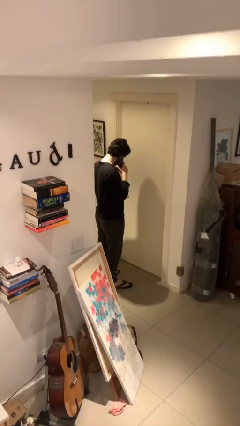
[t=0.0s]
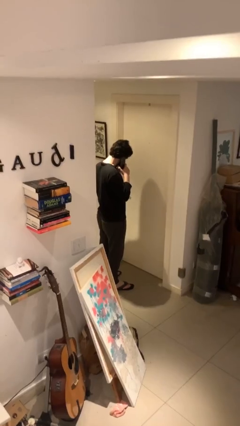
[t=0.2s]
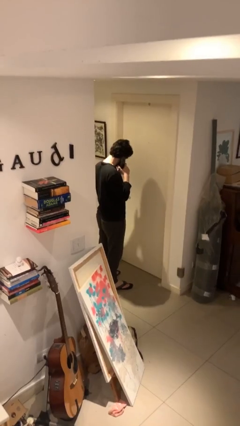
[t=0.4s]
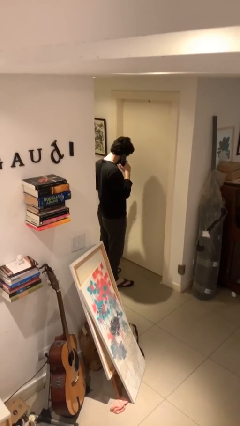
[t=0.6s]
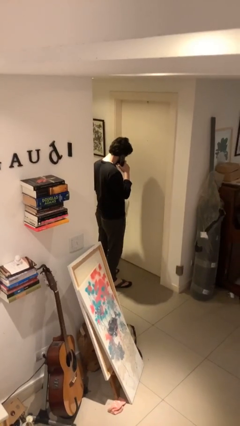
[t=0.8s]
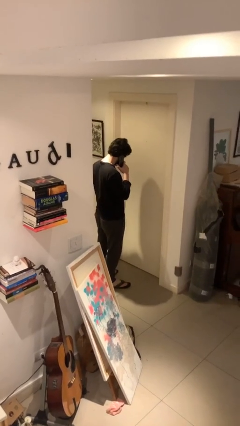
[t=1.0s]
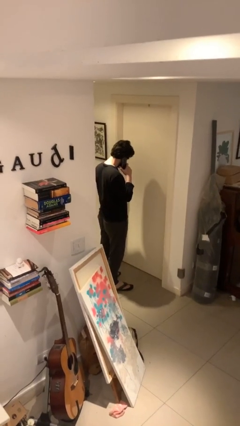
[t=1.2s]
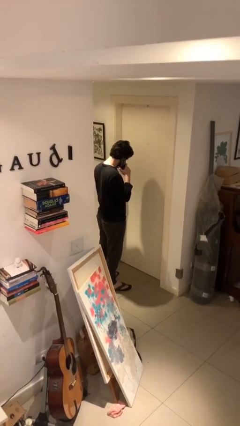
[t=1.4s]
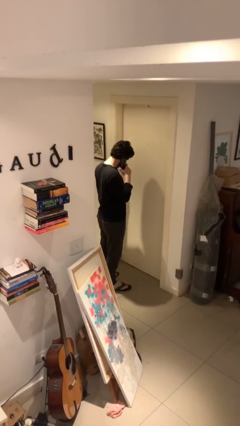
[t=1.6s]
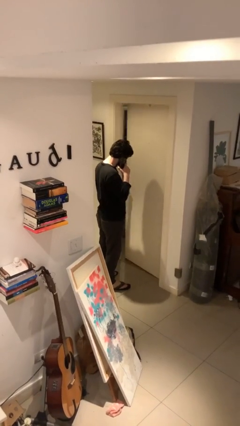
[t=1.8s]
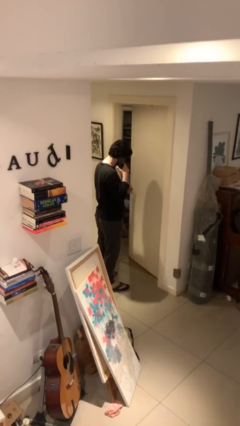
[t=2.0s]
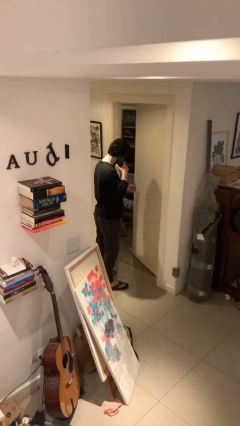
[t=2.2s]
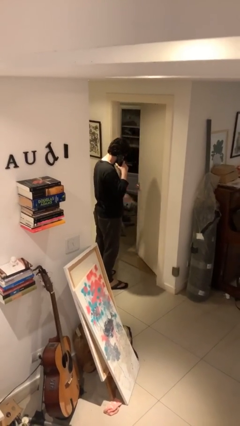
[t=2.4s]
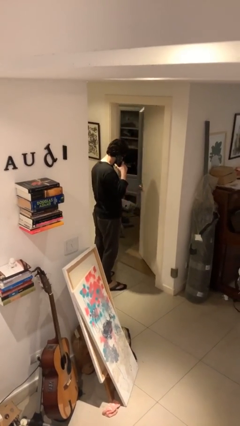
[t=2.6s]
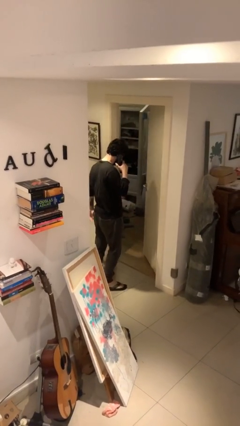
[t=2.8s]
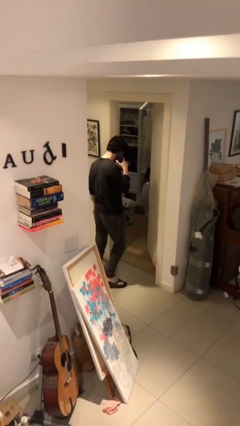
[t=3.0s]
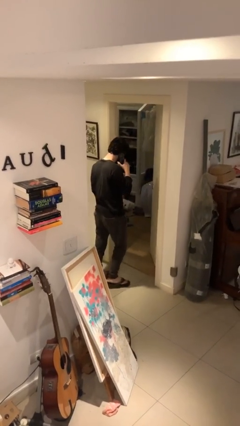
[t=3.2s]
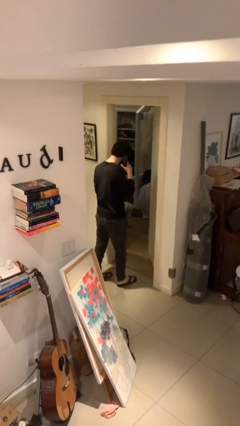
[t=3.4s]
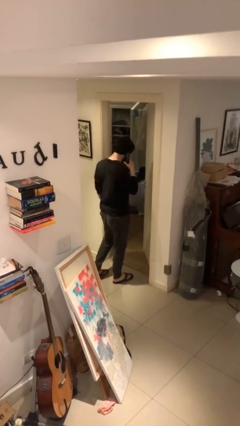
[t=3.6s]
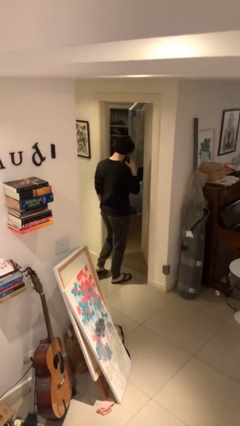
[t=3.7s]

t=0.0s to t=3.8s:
person opens facility door

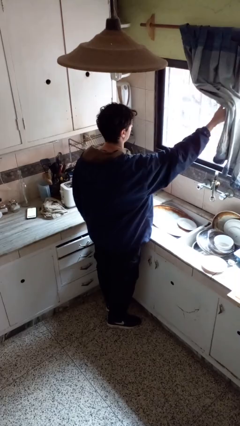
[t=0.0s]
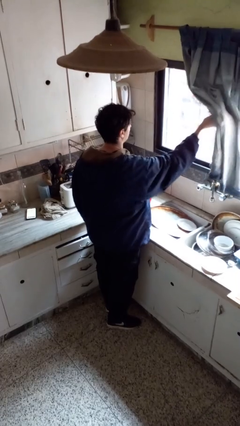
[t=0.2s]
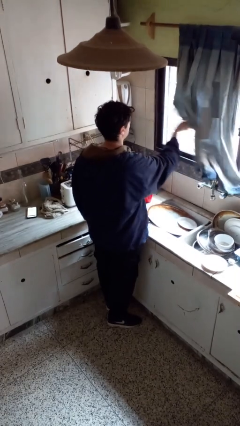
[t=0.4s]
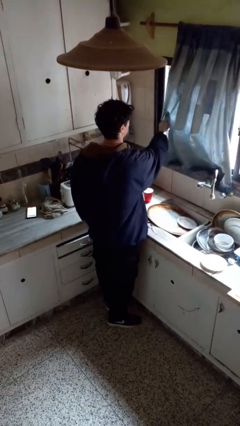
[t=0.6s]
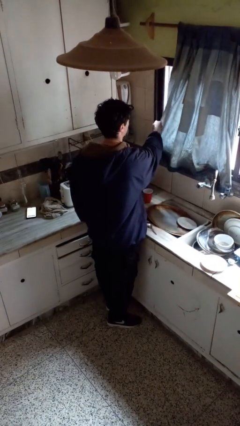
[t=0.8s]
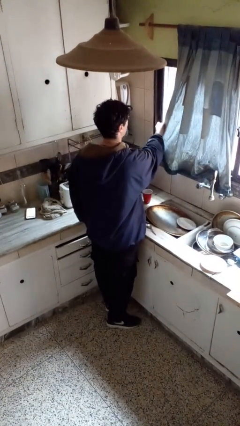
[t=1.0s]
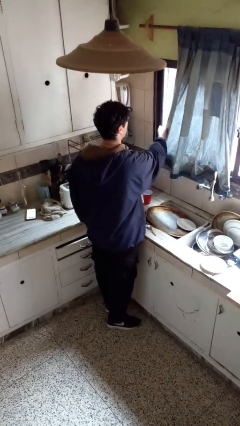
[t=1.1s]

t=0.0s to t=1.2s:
person closes curtains

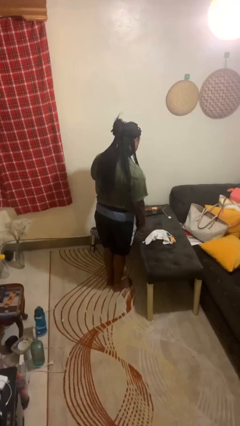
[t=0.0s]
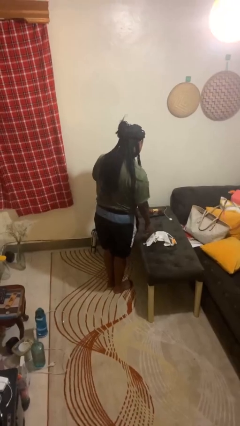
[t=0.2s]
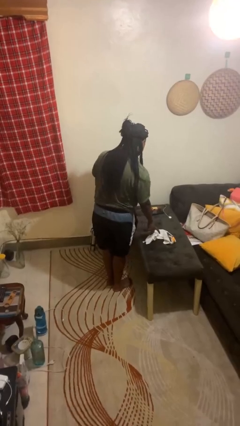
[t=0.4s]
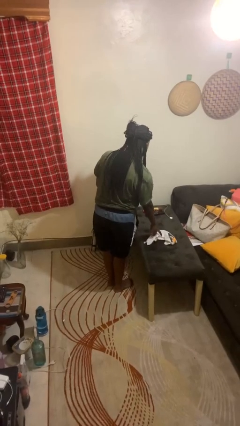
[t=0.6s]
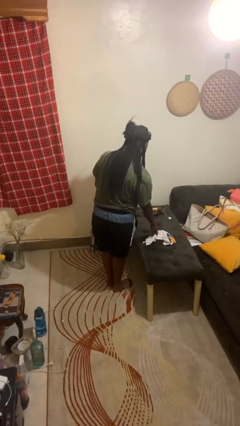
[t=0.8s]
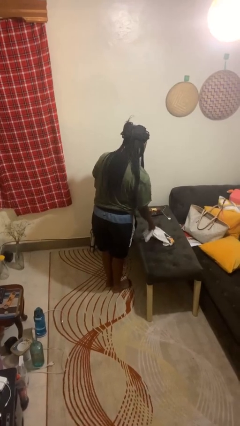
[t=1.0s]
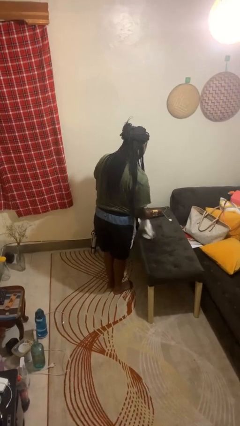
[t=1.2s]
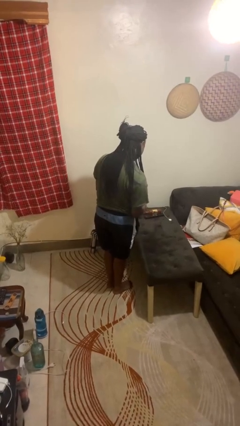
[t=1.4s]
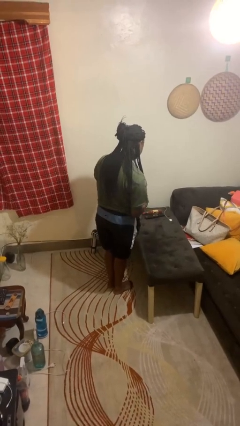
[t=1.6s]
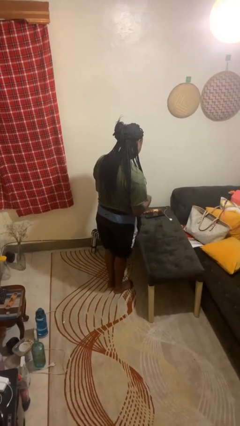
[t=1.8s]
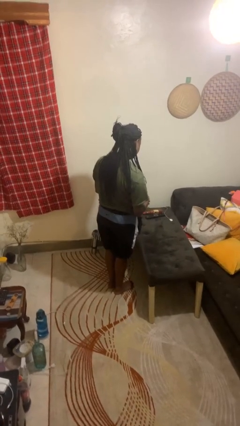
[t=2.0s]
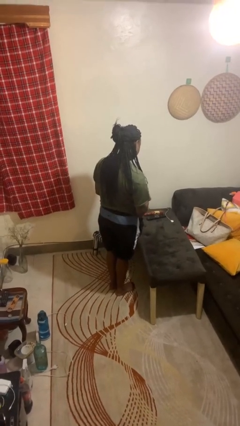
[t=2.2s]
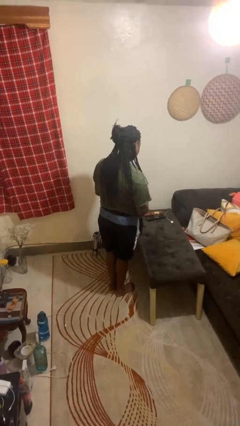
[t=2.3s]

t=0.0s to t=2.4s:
person picks up object from table

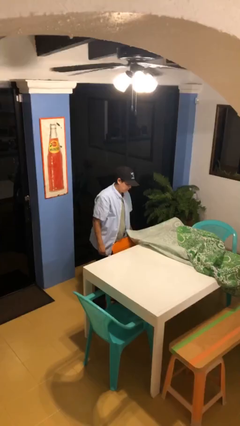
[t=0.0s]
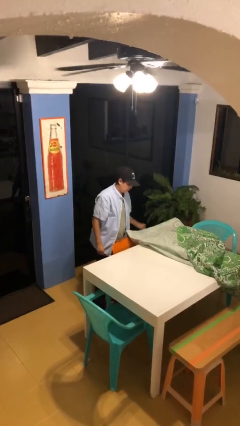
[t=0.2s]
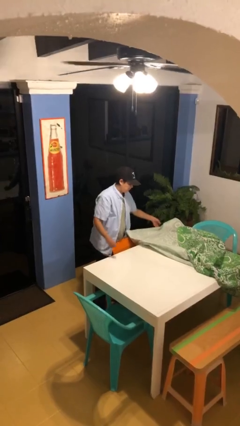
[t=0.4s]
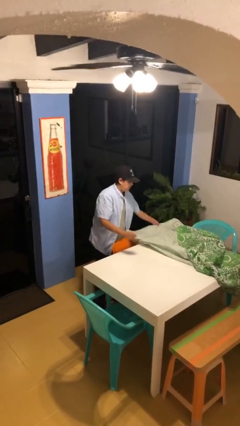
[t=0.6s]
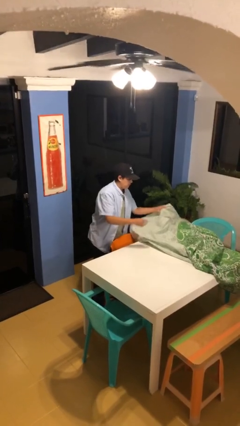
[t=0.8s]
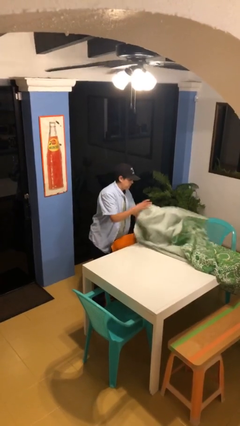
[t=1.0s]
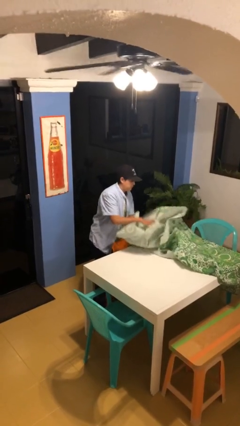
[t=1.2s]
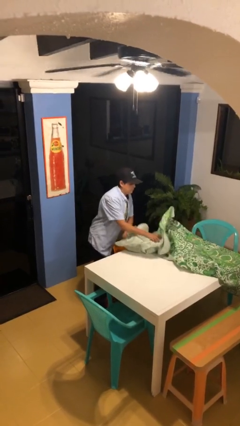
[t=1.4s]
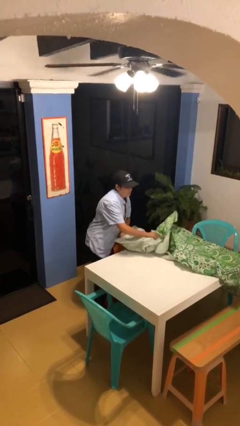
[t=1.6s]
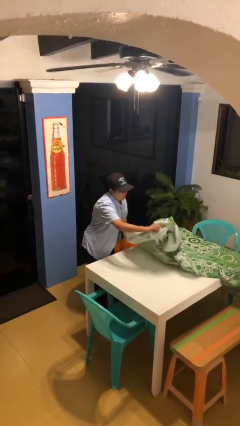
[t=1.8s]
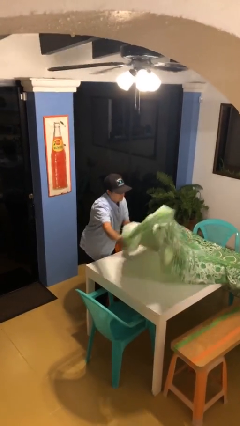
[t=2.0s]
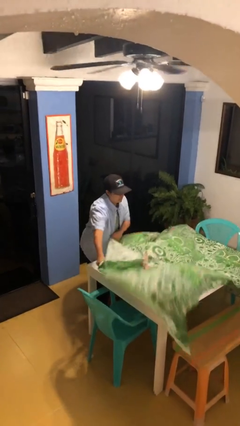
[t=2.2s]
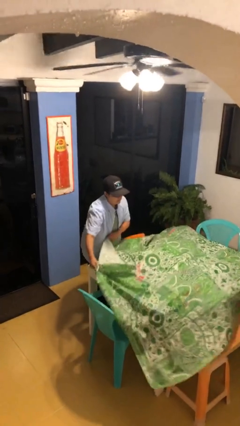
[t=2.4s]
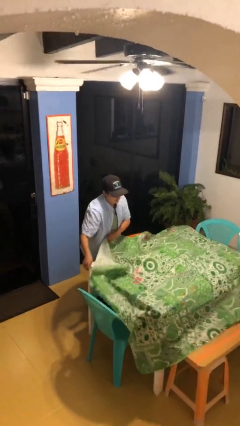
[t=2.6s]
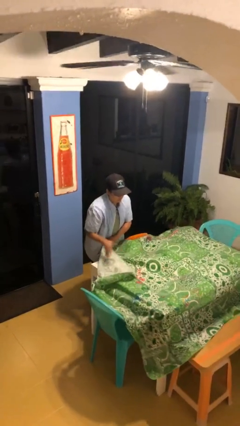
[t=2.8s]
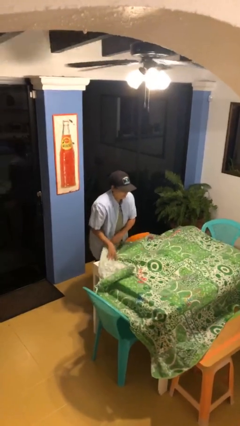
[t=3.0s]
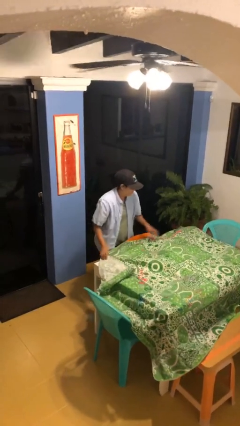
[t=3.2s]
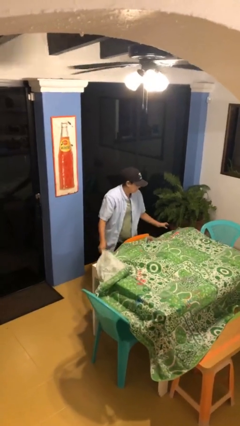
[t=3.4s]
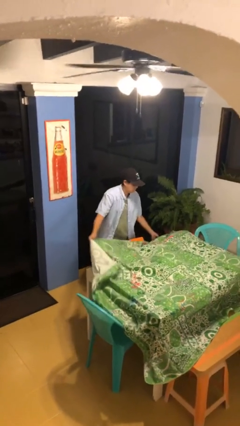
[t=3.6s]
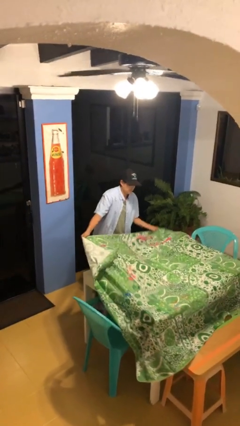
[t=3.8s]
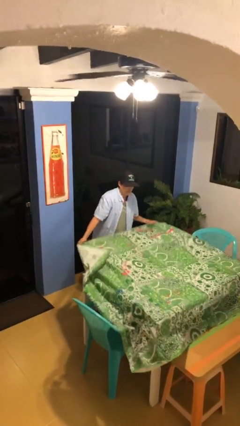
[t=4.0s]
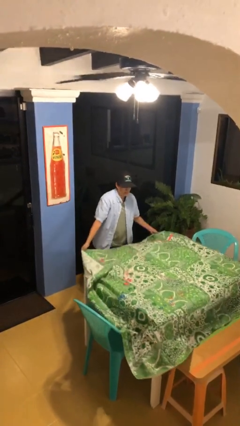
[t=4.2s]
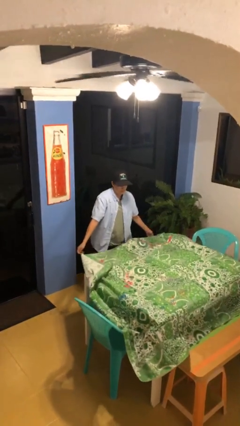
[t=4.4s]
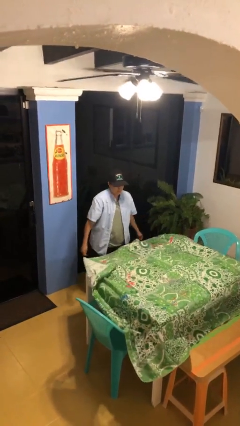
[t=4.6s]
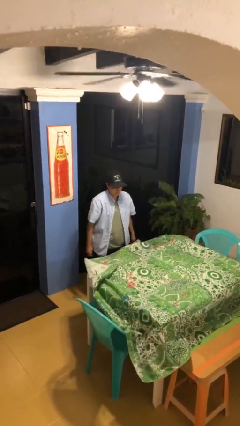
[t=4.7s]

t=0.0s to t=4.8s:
person spreads tablecloth

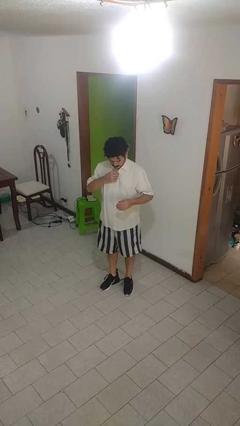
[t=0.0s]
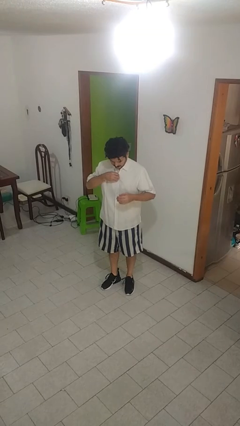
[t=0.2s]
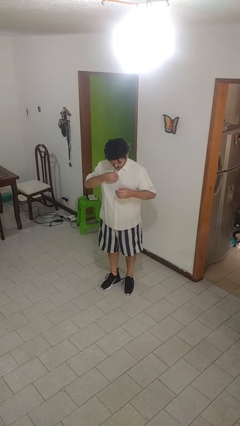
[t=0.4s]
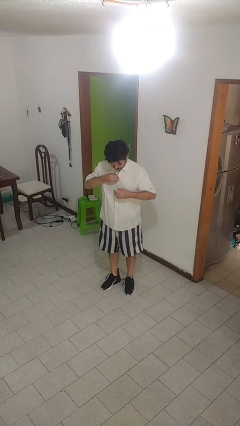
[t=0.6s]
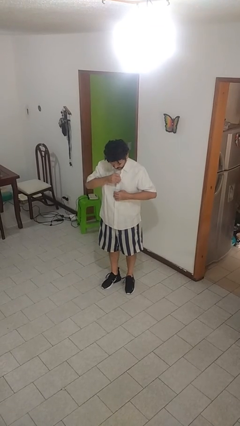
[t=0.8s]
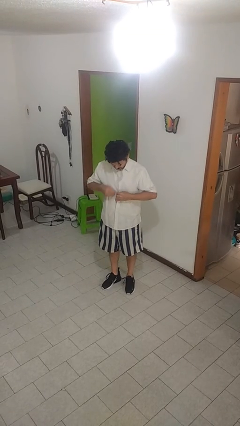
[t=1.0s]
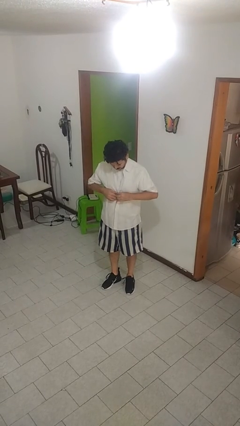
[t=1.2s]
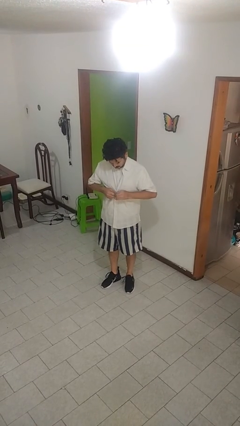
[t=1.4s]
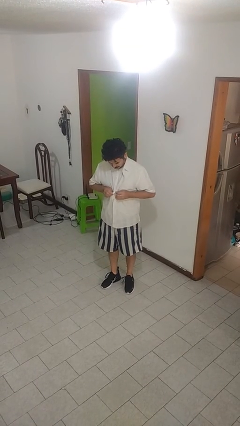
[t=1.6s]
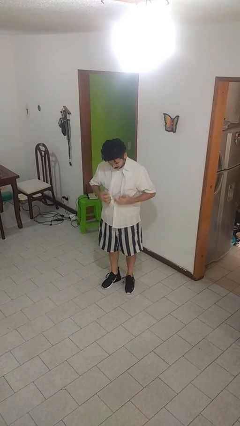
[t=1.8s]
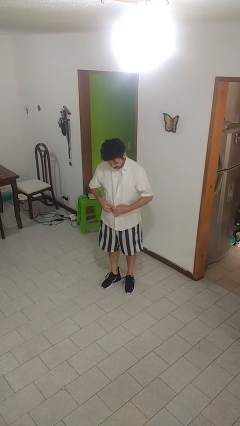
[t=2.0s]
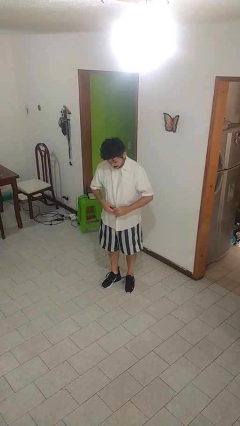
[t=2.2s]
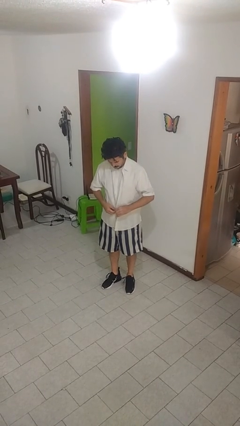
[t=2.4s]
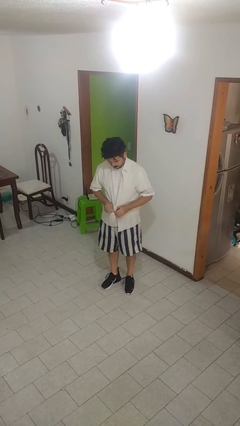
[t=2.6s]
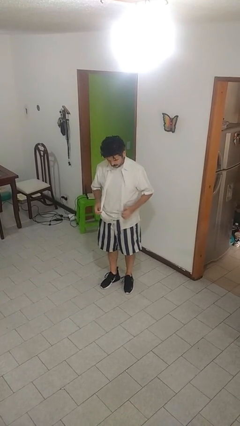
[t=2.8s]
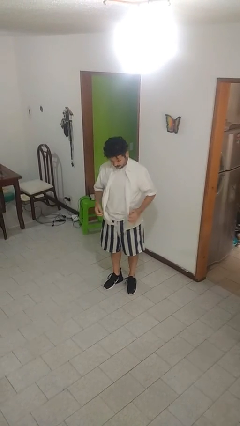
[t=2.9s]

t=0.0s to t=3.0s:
person unbuttons shirt

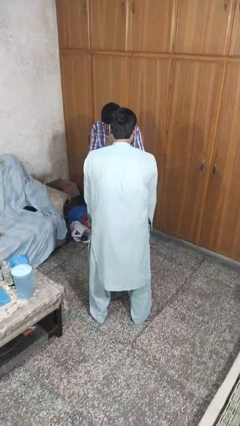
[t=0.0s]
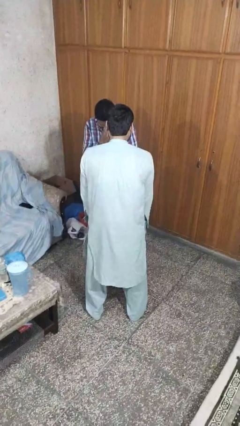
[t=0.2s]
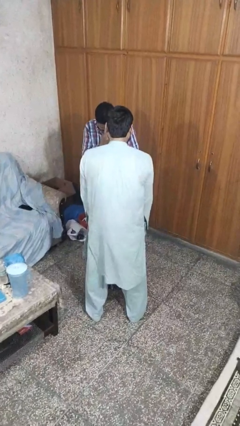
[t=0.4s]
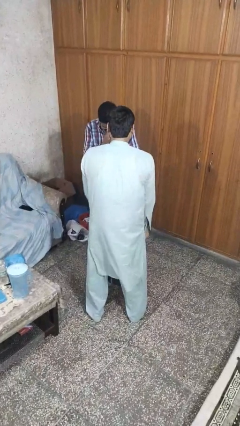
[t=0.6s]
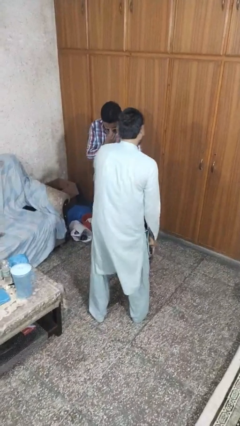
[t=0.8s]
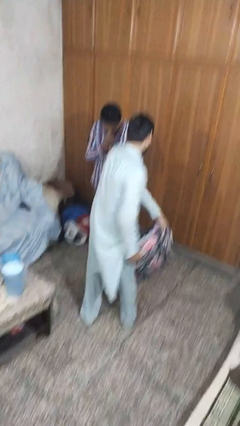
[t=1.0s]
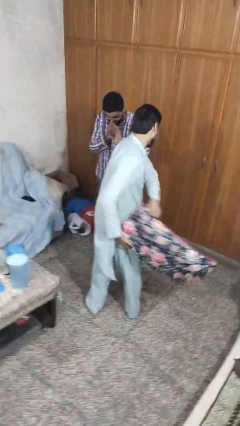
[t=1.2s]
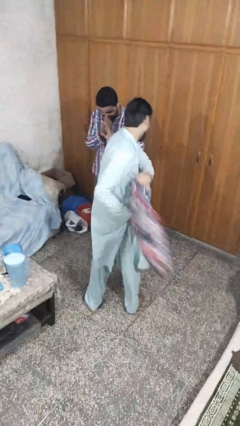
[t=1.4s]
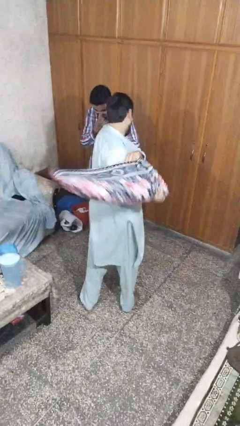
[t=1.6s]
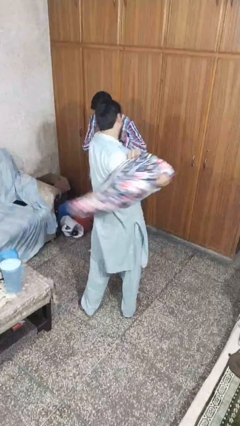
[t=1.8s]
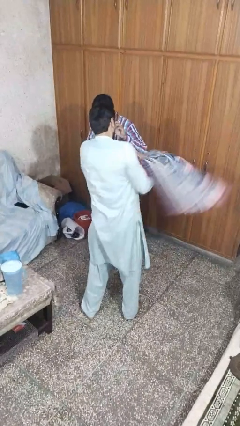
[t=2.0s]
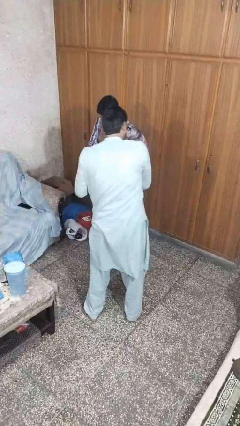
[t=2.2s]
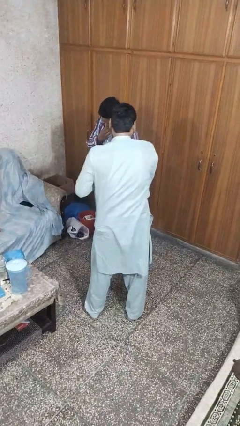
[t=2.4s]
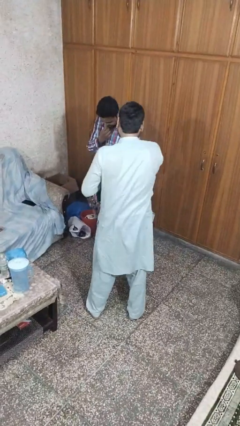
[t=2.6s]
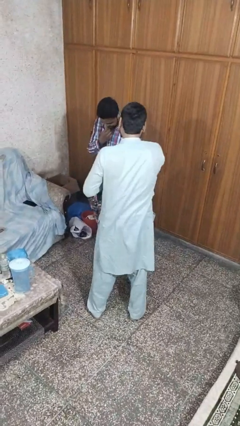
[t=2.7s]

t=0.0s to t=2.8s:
person hits person with pillow
